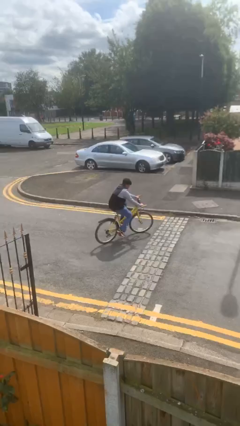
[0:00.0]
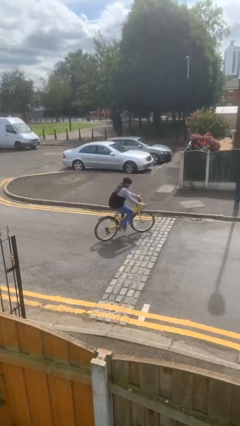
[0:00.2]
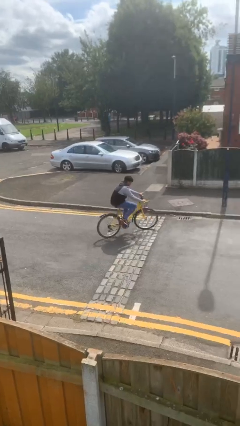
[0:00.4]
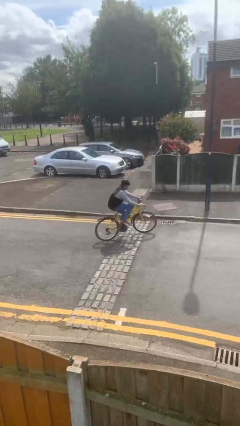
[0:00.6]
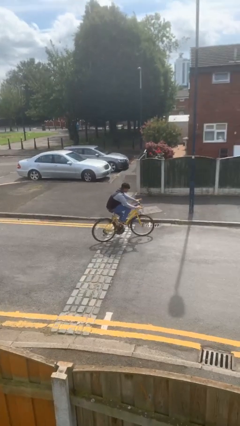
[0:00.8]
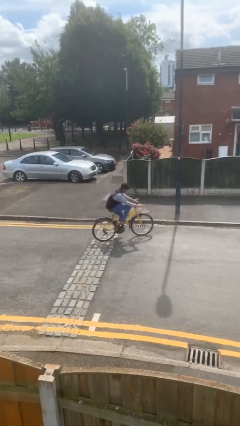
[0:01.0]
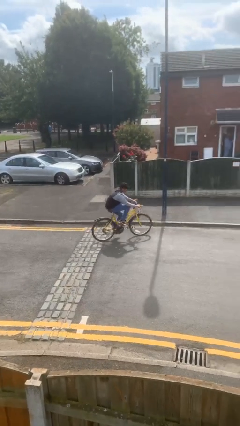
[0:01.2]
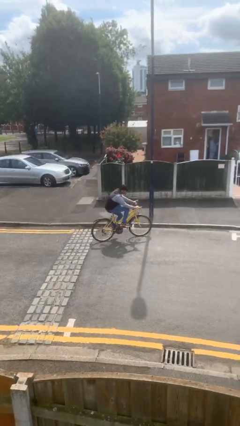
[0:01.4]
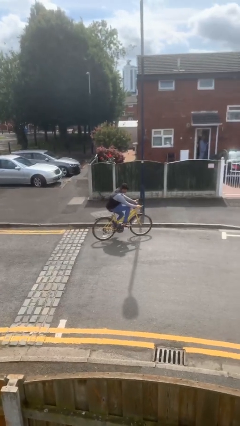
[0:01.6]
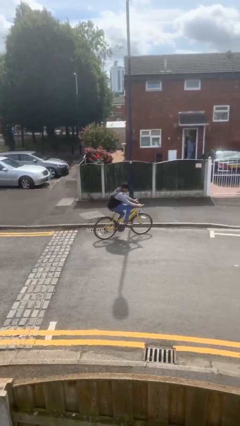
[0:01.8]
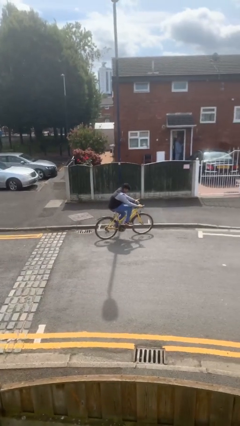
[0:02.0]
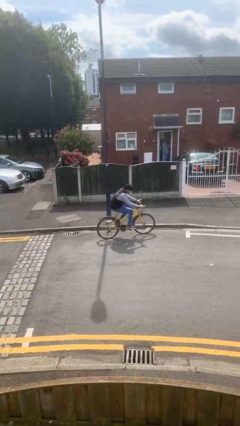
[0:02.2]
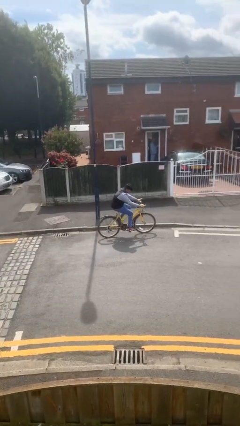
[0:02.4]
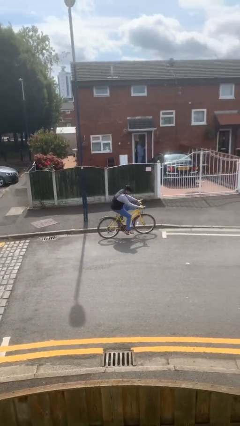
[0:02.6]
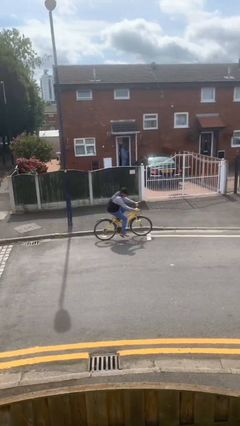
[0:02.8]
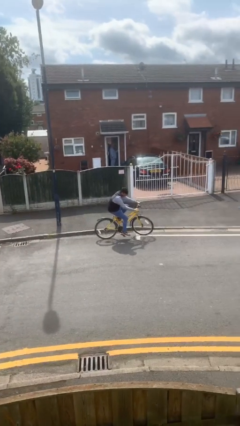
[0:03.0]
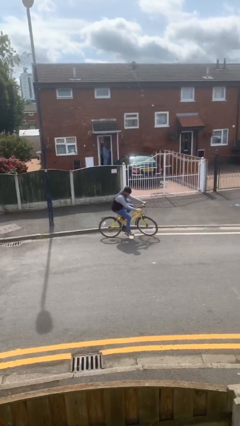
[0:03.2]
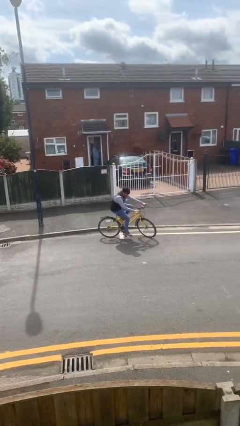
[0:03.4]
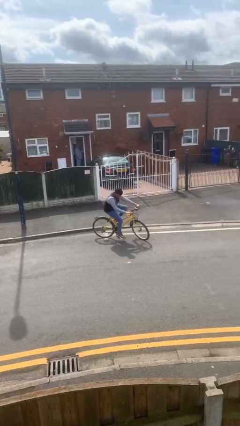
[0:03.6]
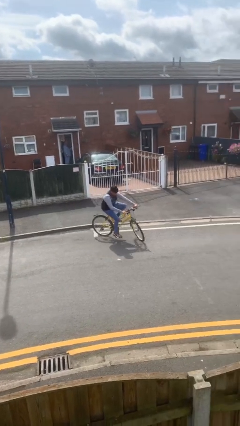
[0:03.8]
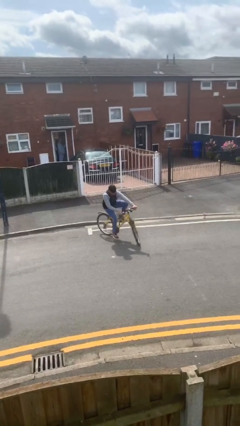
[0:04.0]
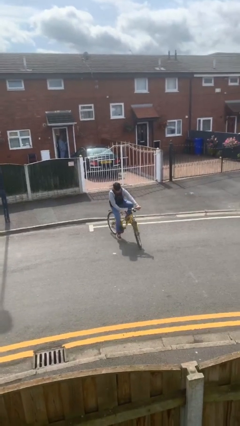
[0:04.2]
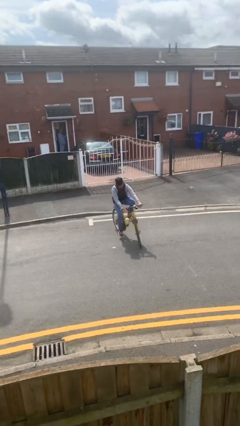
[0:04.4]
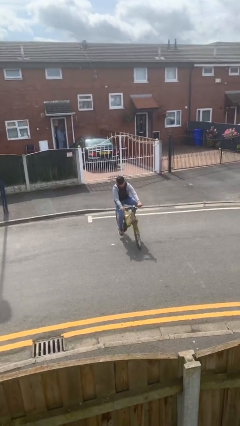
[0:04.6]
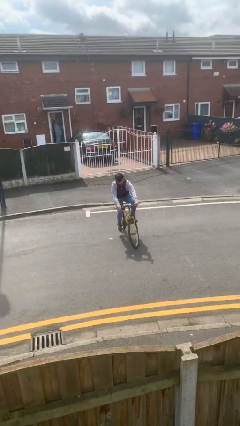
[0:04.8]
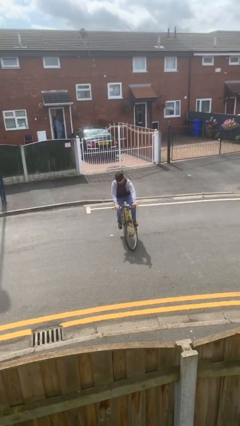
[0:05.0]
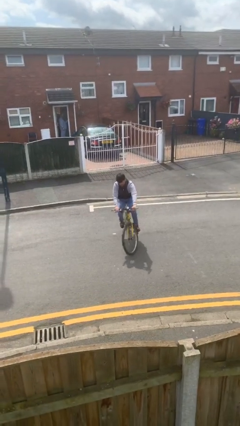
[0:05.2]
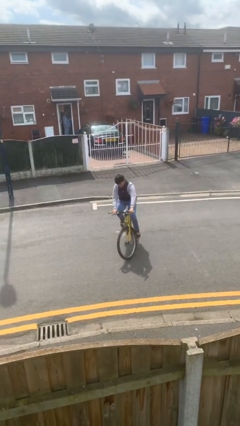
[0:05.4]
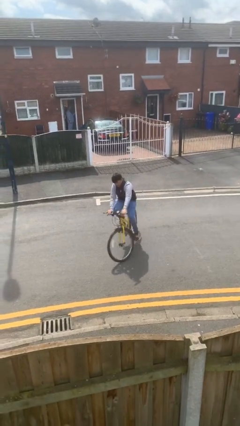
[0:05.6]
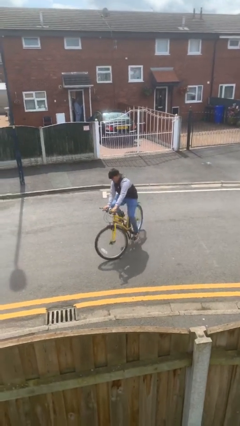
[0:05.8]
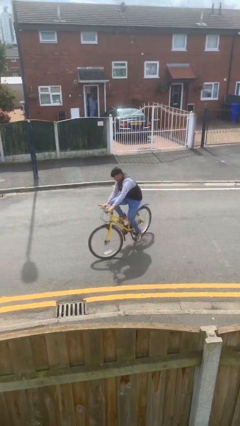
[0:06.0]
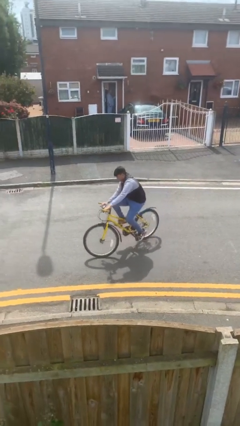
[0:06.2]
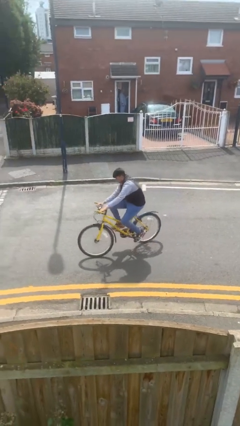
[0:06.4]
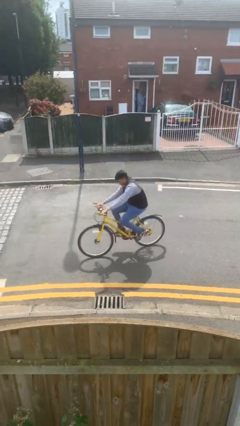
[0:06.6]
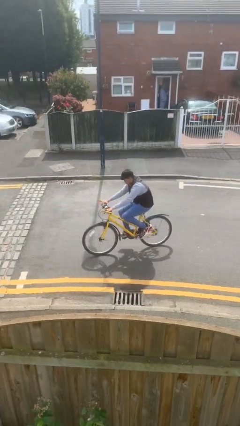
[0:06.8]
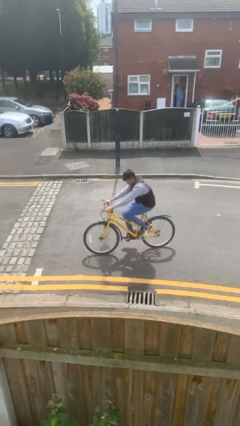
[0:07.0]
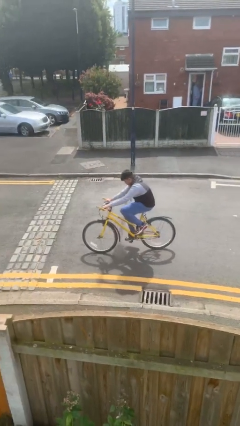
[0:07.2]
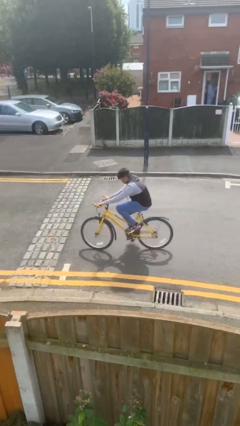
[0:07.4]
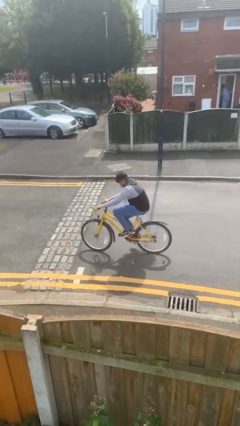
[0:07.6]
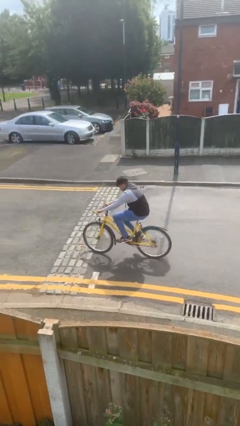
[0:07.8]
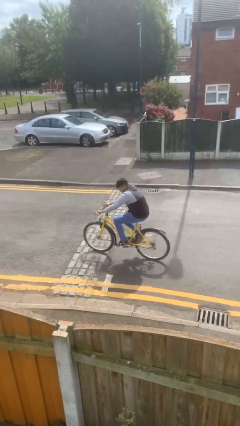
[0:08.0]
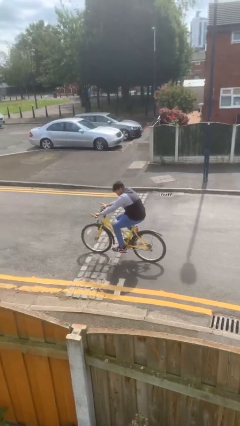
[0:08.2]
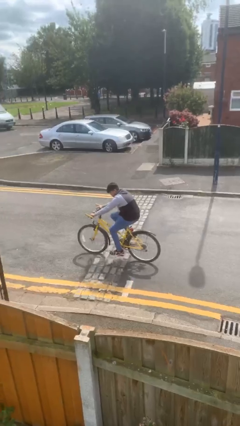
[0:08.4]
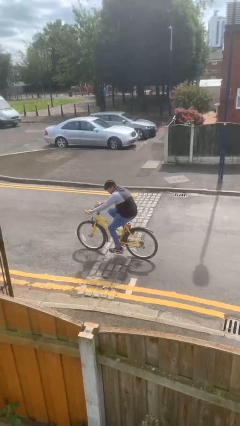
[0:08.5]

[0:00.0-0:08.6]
person rides bicycle

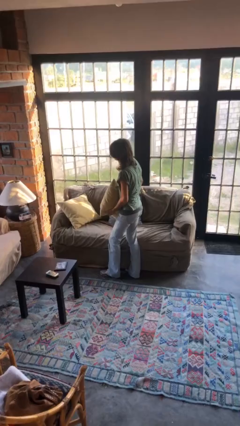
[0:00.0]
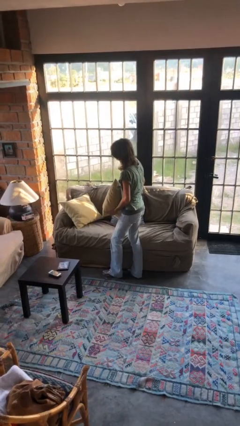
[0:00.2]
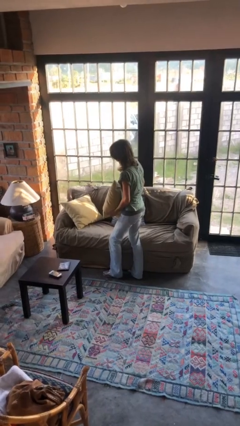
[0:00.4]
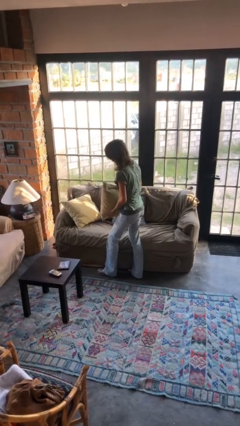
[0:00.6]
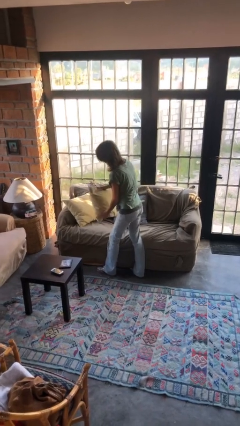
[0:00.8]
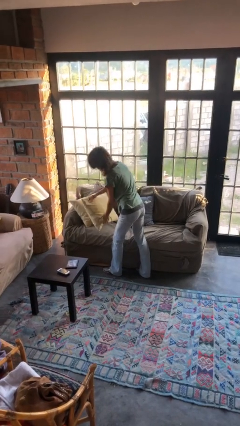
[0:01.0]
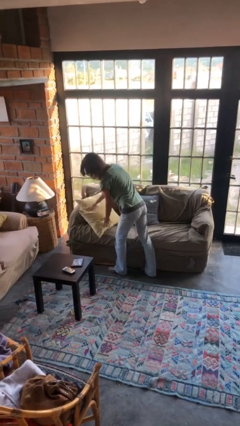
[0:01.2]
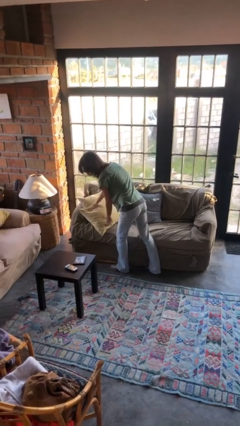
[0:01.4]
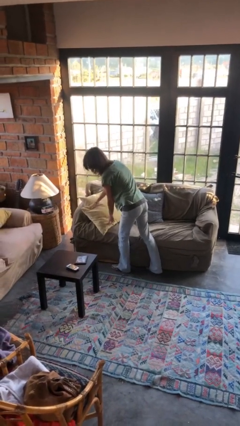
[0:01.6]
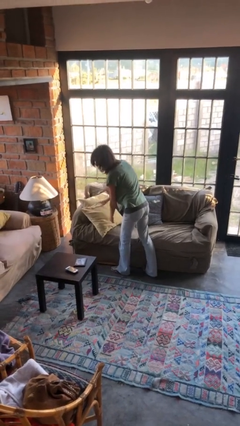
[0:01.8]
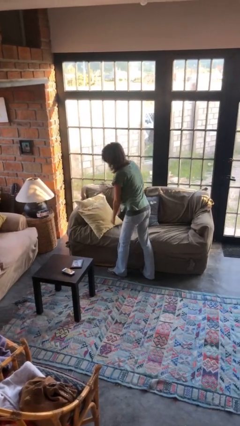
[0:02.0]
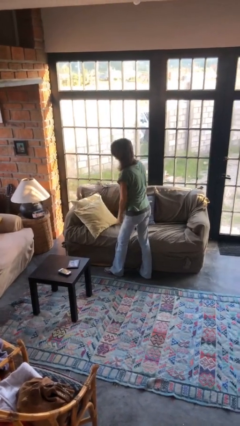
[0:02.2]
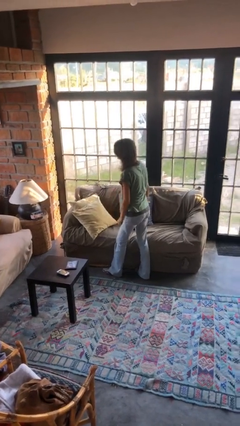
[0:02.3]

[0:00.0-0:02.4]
person puts down object on couch

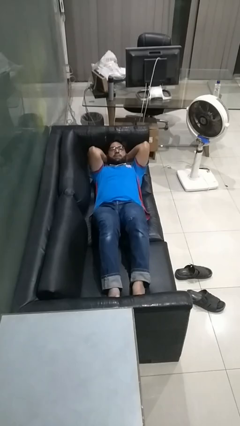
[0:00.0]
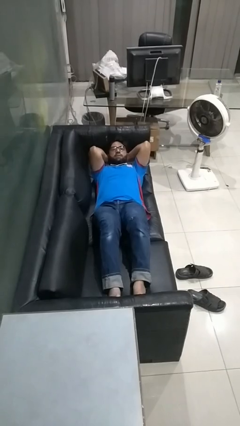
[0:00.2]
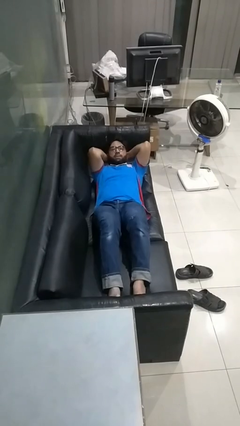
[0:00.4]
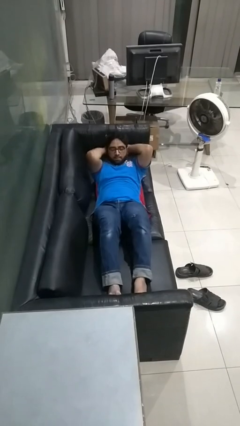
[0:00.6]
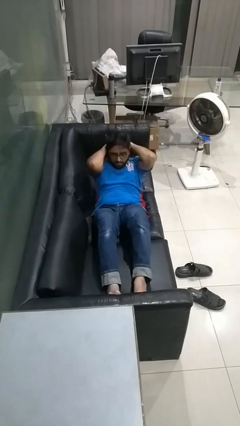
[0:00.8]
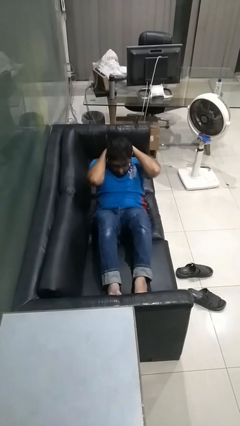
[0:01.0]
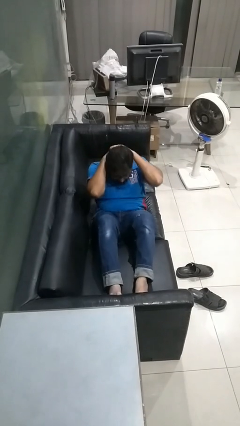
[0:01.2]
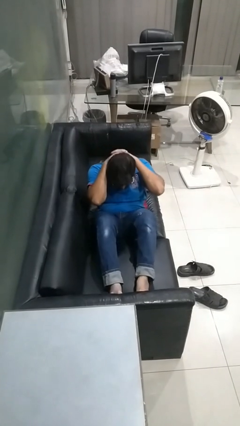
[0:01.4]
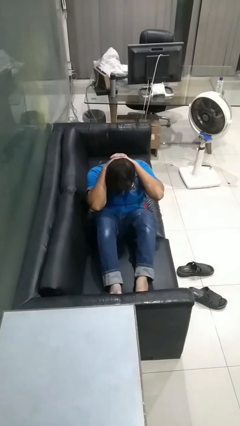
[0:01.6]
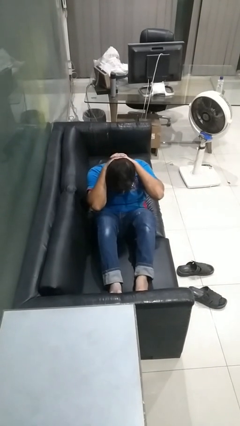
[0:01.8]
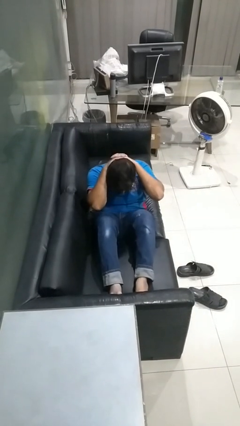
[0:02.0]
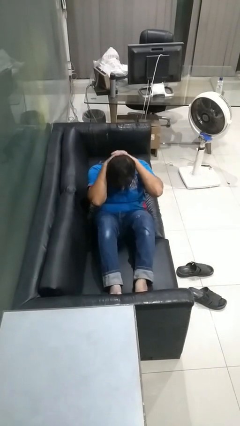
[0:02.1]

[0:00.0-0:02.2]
person exercises with situp

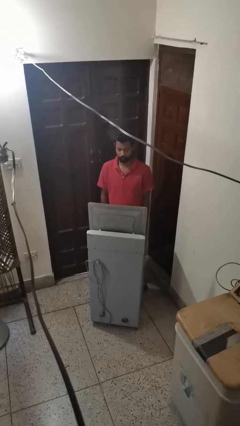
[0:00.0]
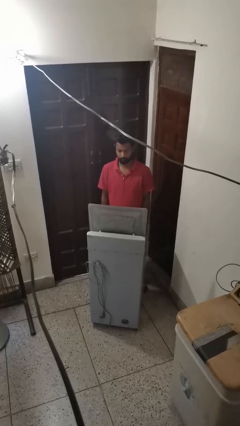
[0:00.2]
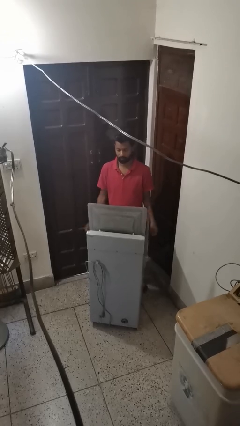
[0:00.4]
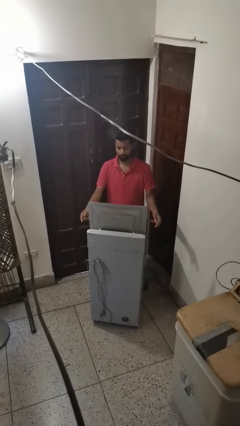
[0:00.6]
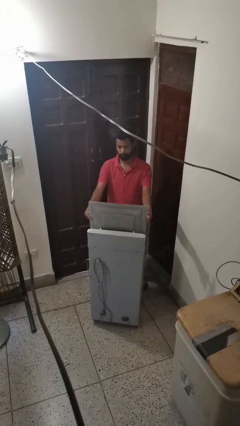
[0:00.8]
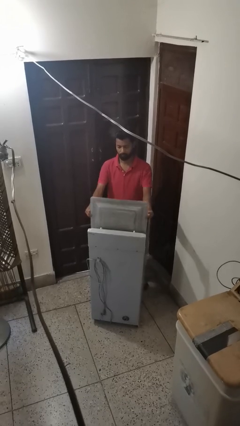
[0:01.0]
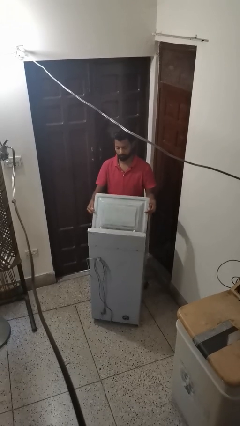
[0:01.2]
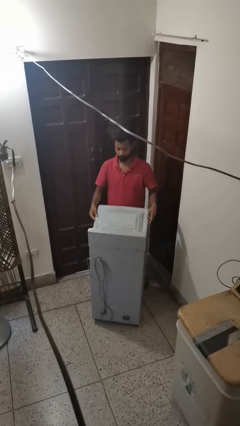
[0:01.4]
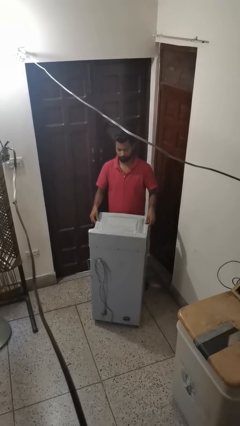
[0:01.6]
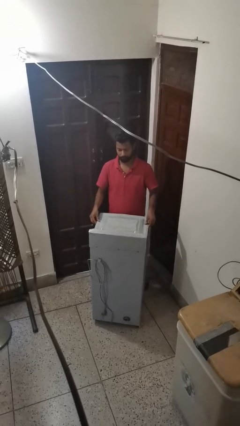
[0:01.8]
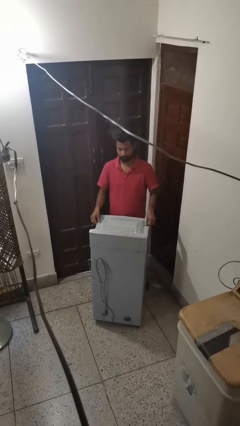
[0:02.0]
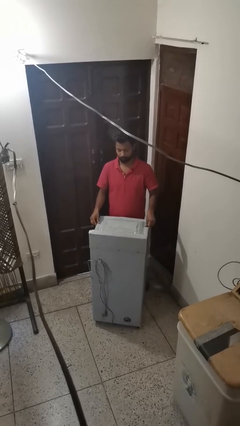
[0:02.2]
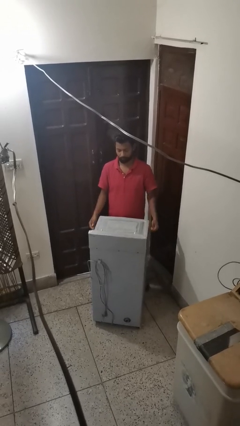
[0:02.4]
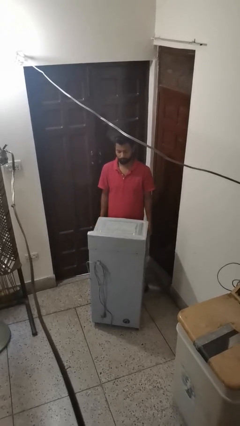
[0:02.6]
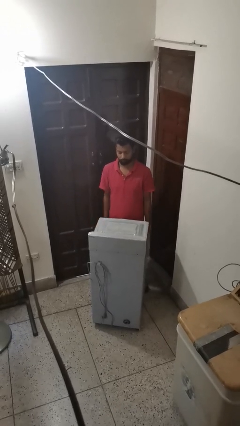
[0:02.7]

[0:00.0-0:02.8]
person closes clothes washer

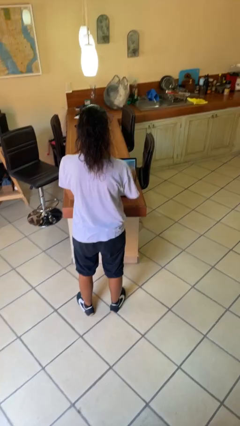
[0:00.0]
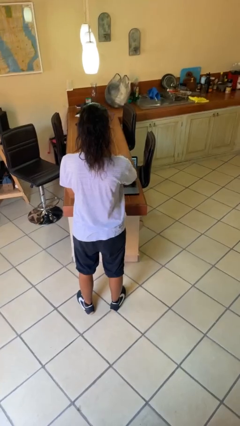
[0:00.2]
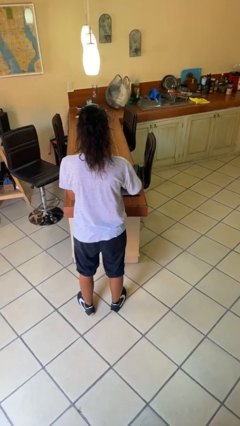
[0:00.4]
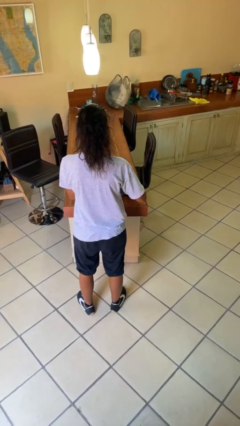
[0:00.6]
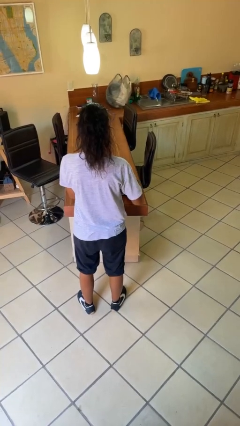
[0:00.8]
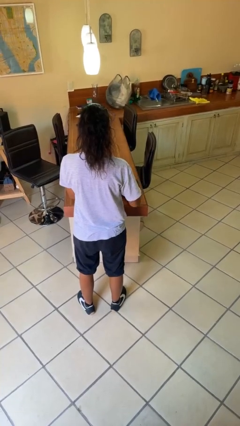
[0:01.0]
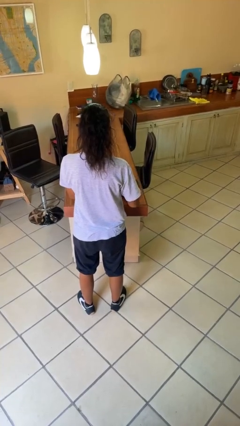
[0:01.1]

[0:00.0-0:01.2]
person closes laptop
